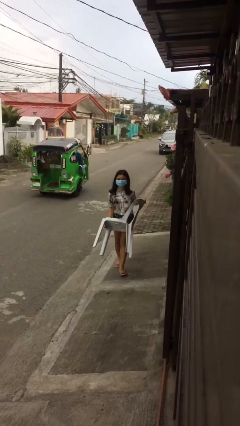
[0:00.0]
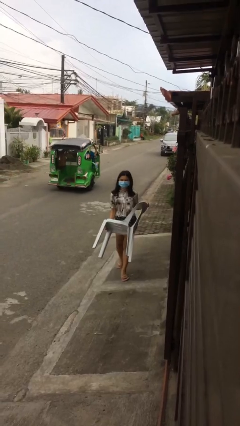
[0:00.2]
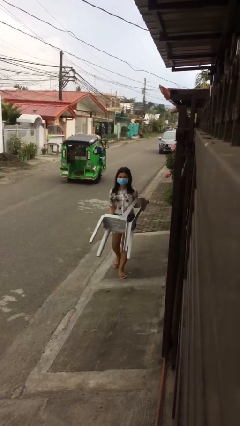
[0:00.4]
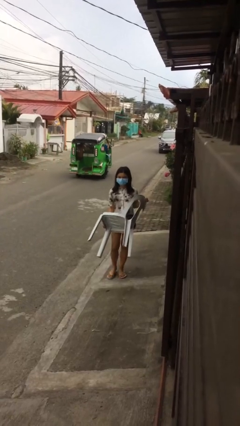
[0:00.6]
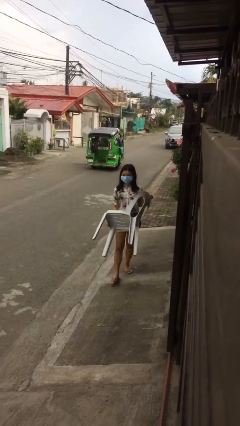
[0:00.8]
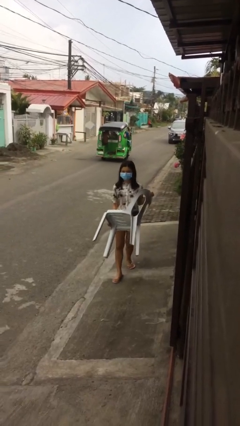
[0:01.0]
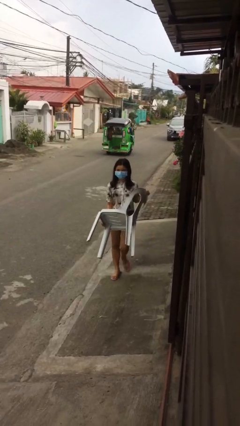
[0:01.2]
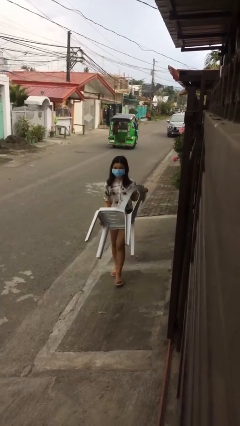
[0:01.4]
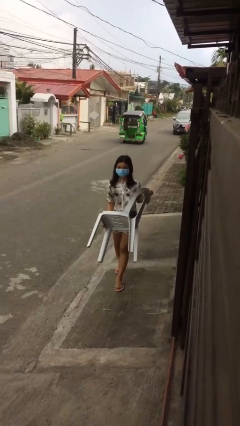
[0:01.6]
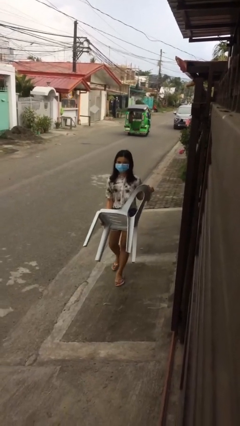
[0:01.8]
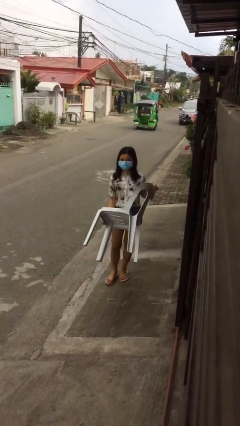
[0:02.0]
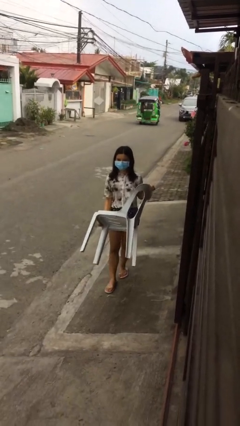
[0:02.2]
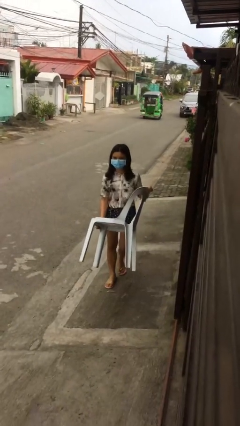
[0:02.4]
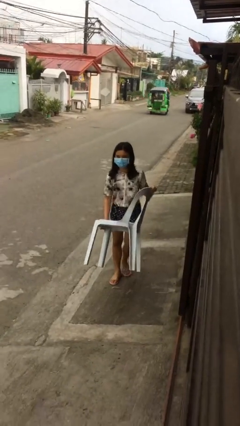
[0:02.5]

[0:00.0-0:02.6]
person carries heavy object

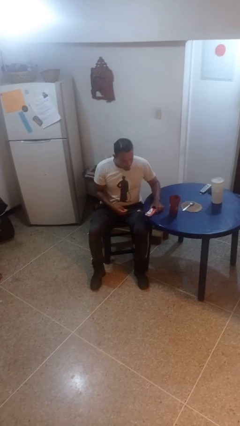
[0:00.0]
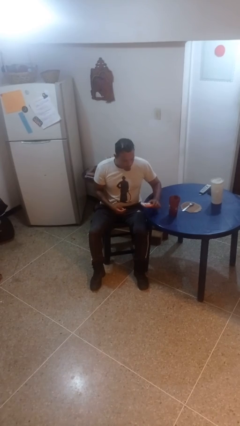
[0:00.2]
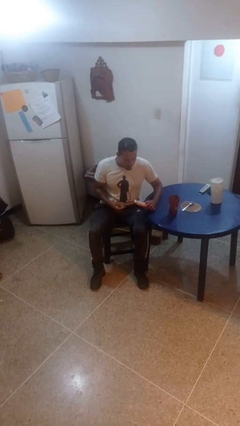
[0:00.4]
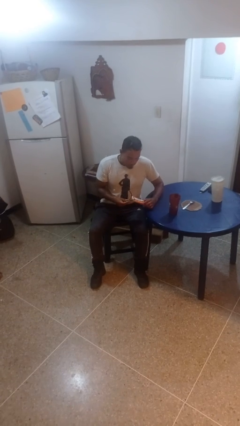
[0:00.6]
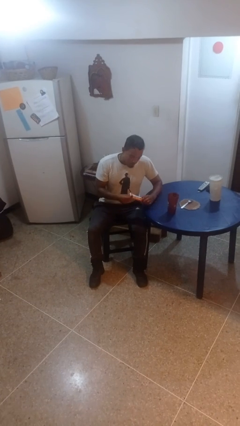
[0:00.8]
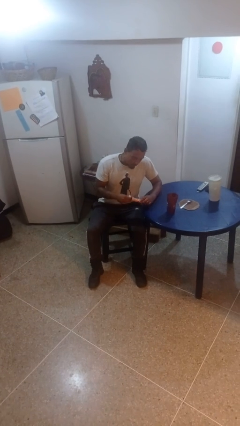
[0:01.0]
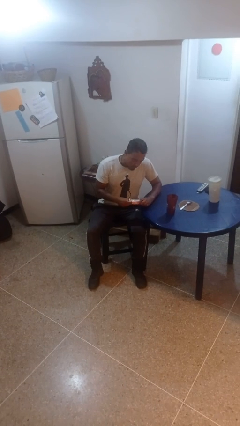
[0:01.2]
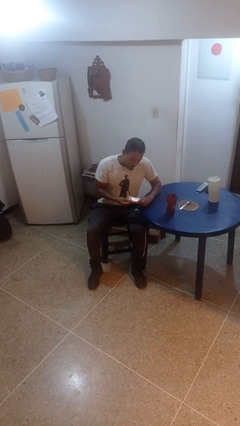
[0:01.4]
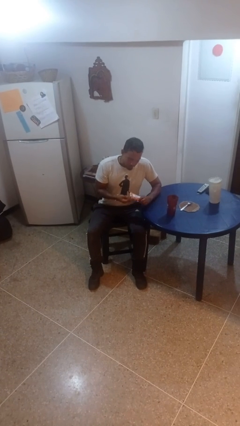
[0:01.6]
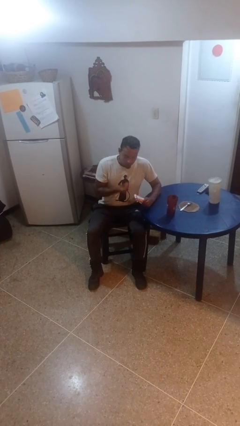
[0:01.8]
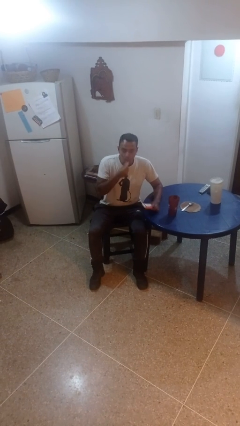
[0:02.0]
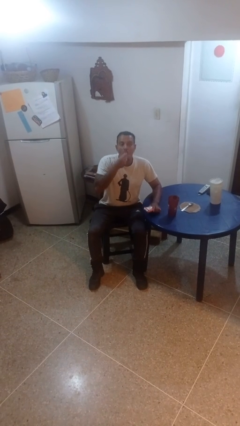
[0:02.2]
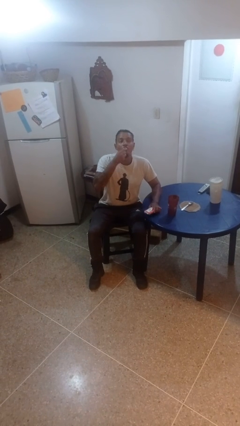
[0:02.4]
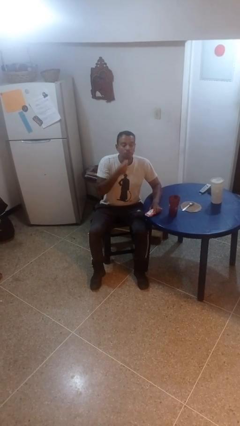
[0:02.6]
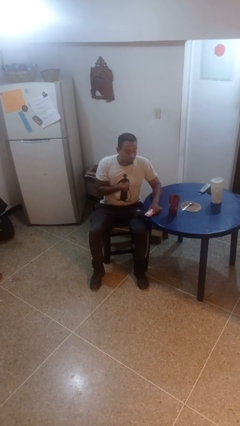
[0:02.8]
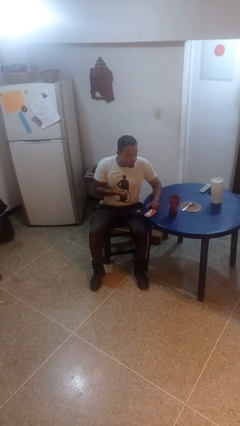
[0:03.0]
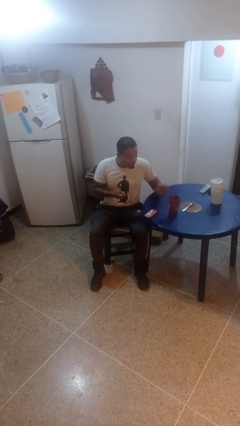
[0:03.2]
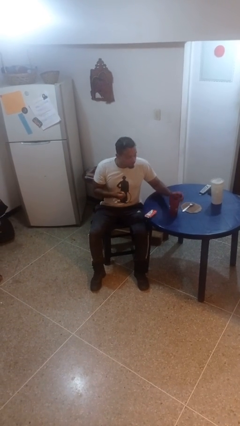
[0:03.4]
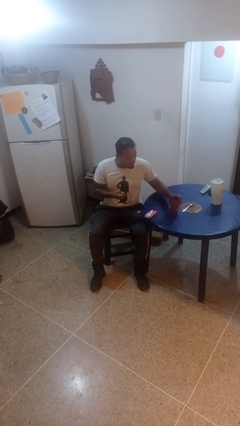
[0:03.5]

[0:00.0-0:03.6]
person takes medicine pills

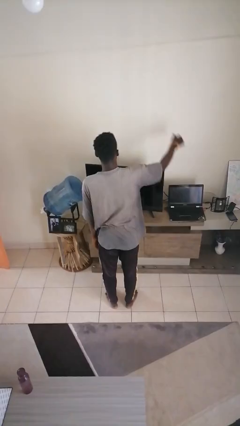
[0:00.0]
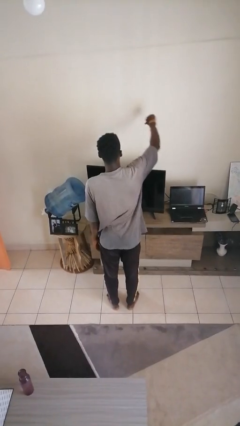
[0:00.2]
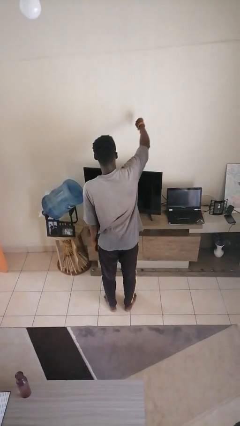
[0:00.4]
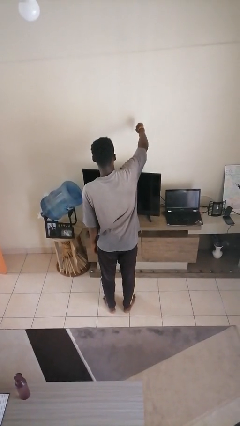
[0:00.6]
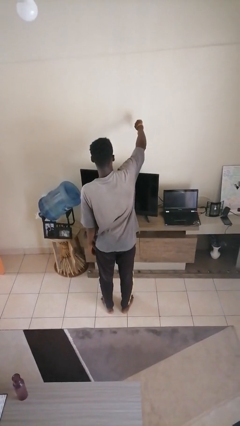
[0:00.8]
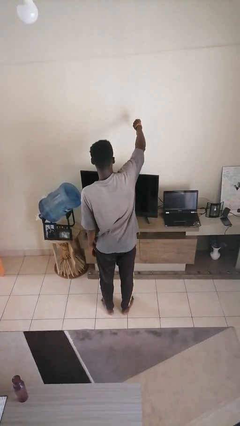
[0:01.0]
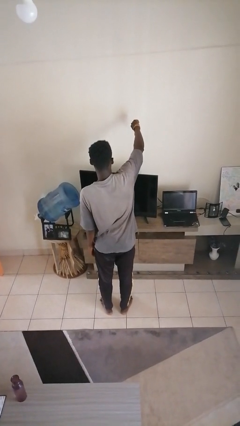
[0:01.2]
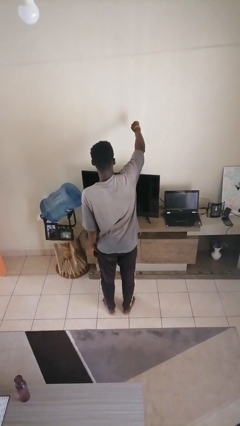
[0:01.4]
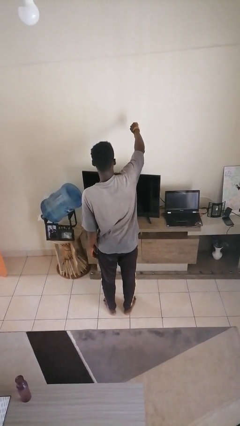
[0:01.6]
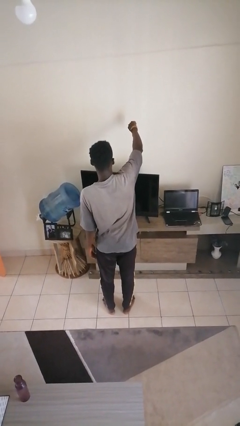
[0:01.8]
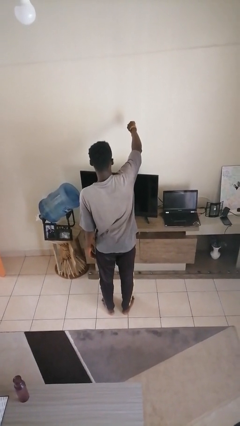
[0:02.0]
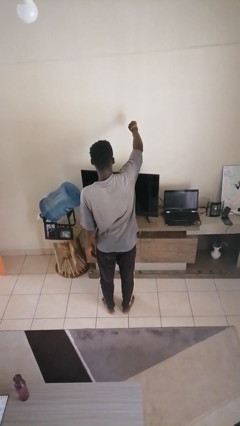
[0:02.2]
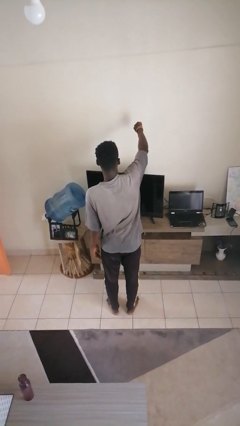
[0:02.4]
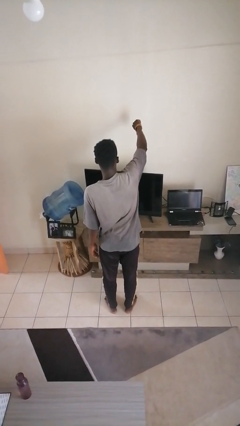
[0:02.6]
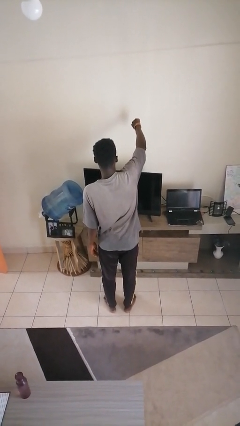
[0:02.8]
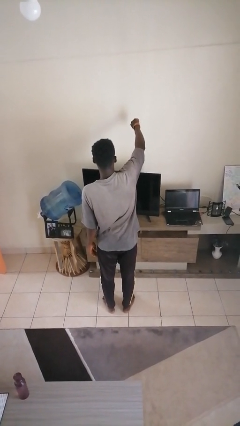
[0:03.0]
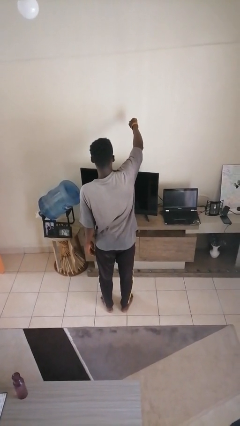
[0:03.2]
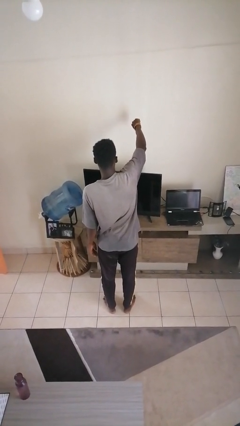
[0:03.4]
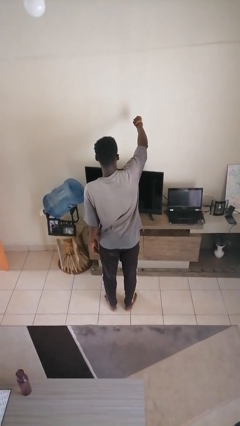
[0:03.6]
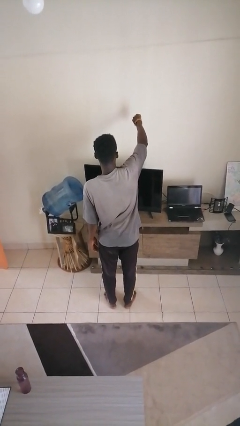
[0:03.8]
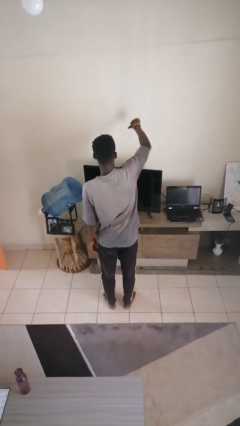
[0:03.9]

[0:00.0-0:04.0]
person gestures thumbs down

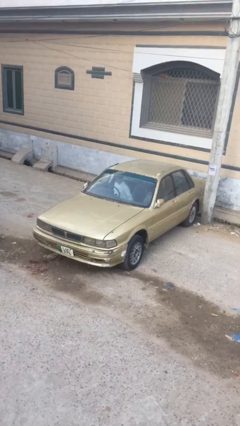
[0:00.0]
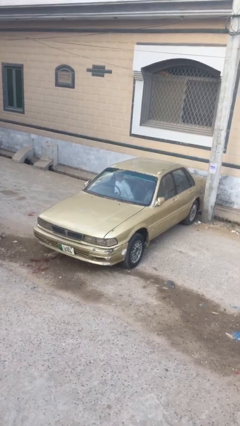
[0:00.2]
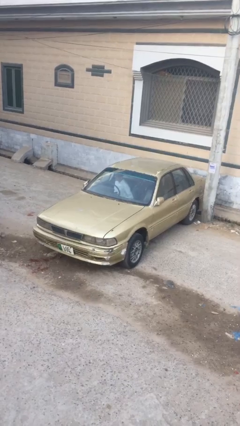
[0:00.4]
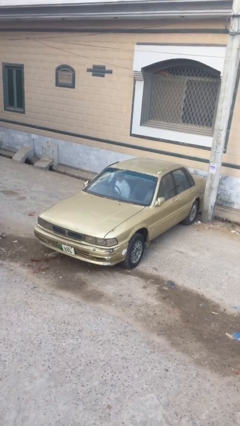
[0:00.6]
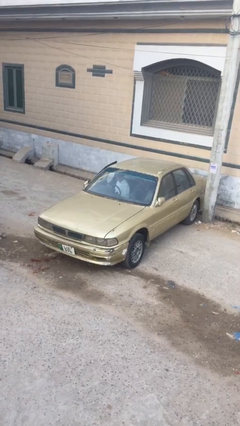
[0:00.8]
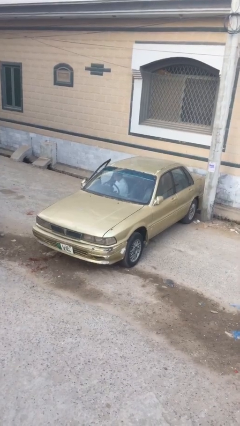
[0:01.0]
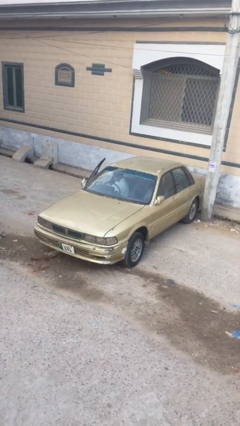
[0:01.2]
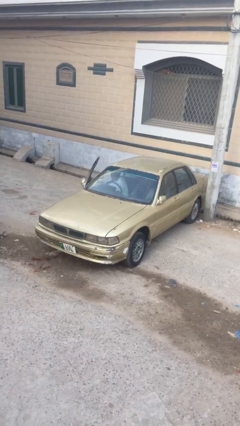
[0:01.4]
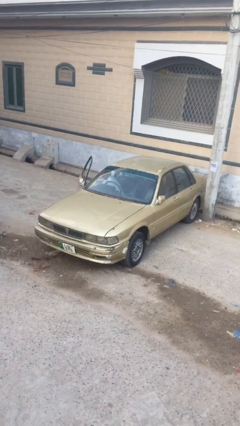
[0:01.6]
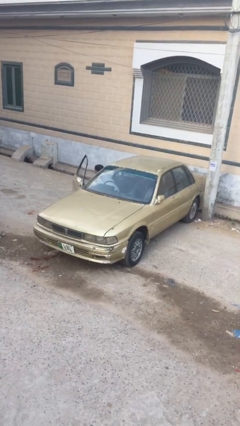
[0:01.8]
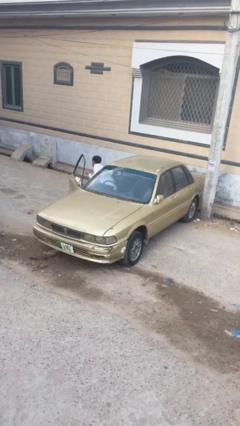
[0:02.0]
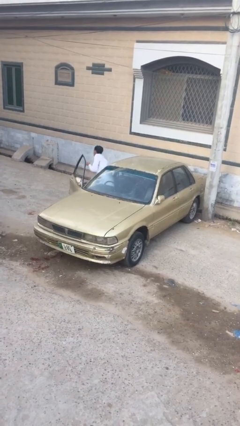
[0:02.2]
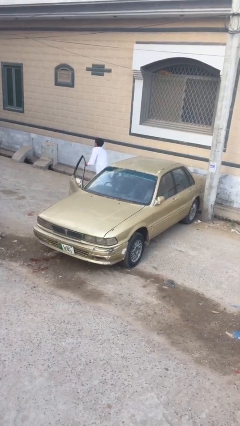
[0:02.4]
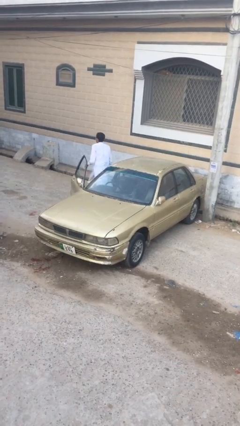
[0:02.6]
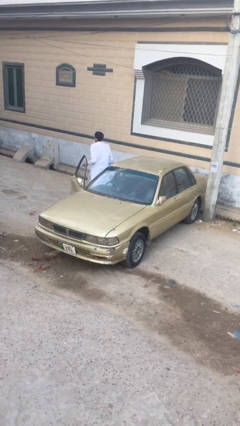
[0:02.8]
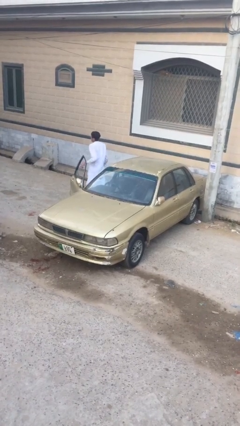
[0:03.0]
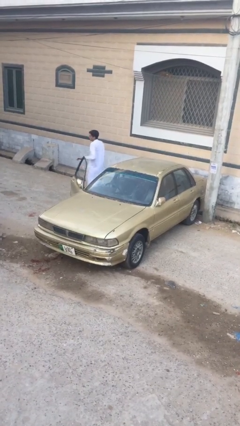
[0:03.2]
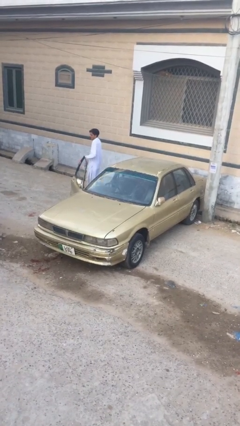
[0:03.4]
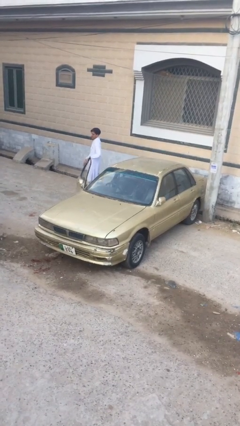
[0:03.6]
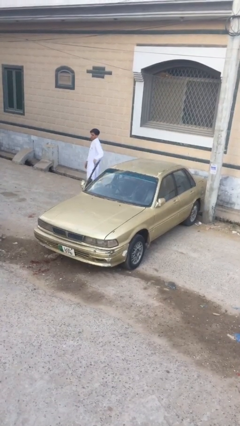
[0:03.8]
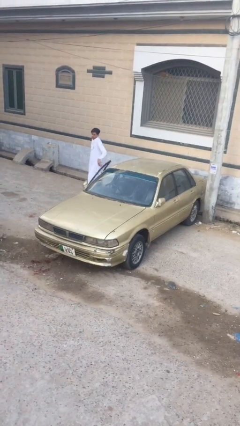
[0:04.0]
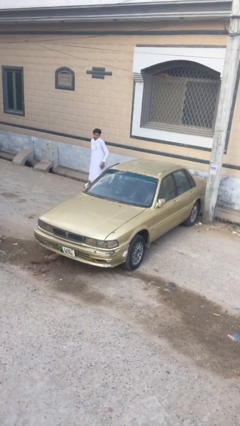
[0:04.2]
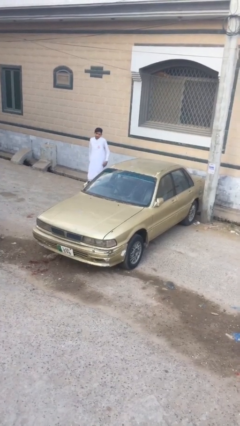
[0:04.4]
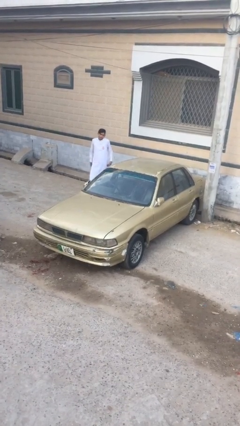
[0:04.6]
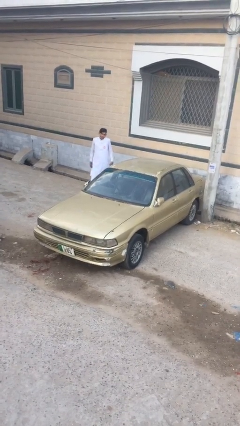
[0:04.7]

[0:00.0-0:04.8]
car drops off person

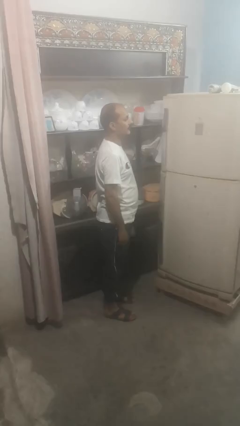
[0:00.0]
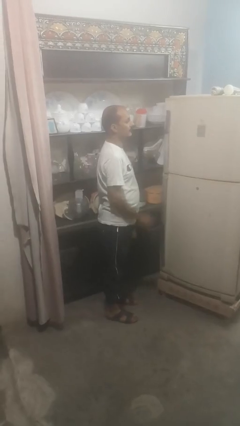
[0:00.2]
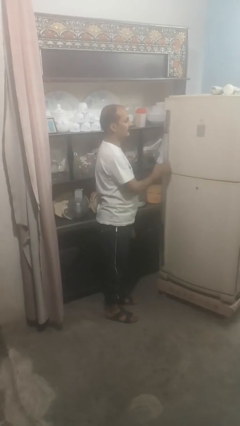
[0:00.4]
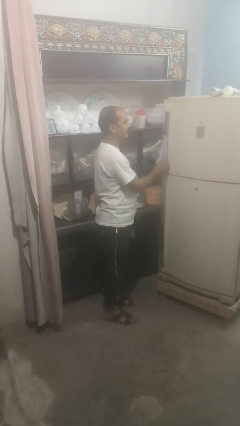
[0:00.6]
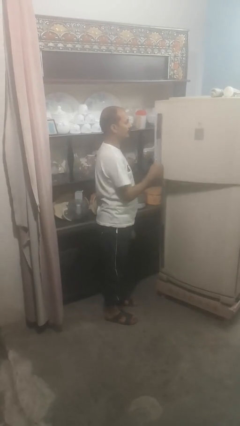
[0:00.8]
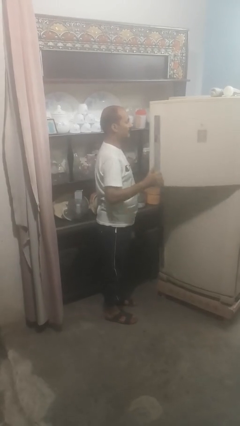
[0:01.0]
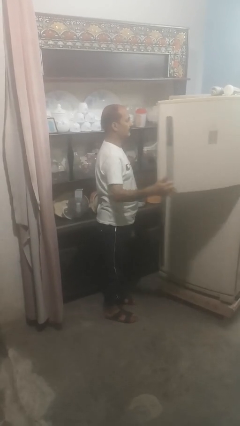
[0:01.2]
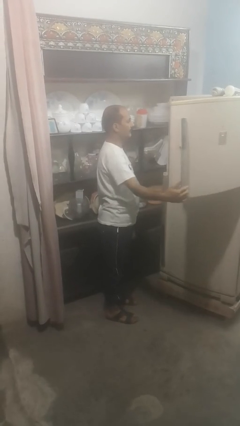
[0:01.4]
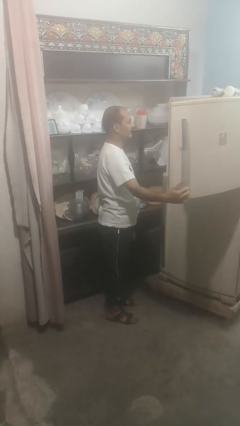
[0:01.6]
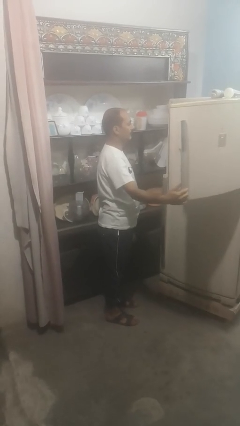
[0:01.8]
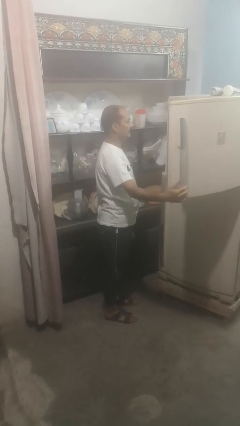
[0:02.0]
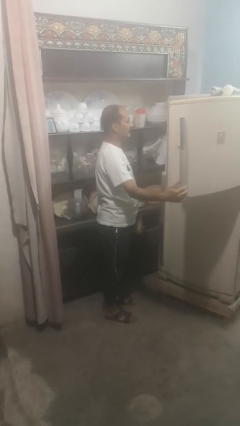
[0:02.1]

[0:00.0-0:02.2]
person opens refrigerator
